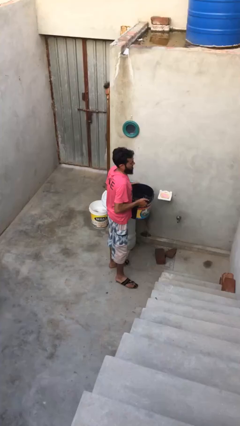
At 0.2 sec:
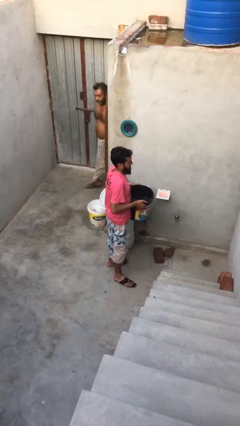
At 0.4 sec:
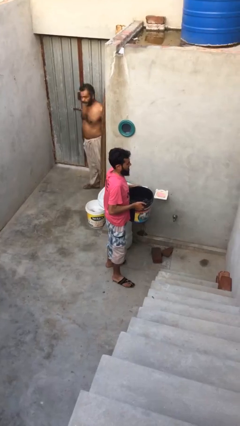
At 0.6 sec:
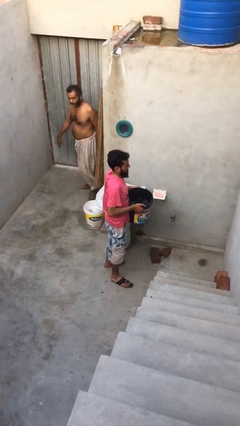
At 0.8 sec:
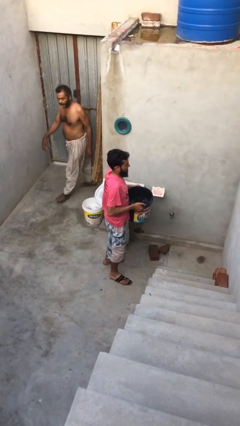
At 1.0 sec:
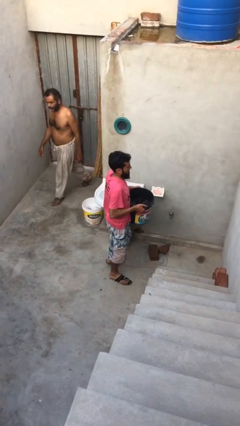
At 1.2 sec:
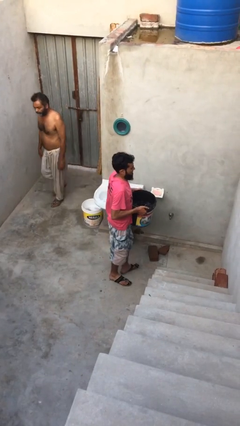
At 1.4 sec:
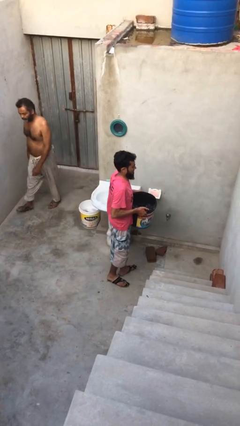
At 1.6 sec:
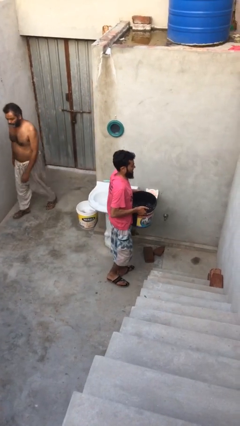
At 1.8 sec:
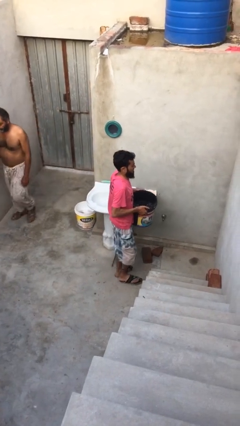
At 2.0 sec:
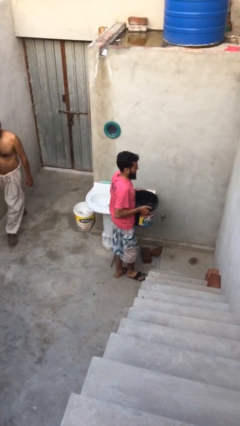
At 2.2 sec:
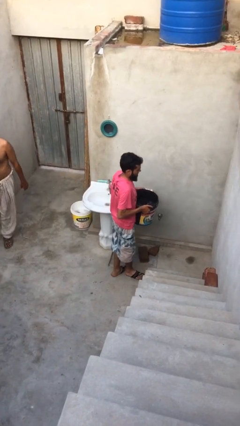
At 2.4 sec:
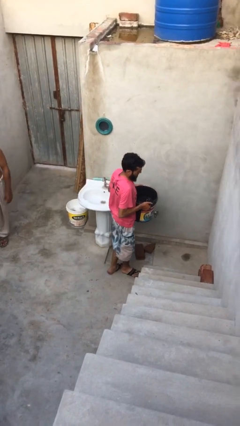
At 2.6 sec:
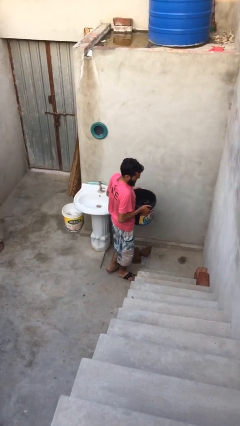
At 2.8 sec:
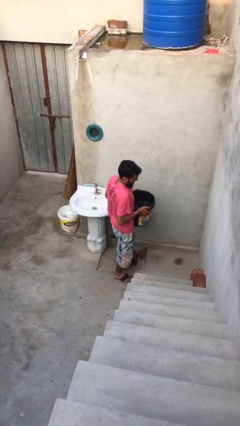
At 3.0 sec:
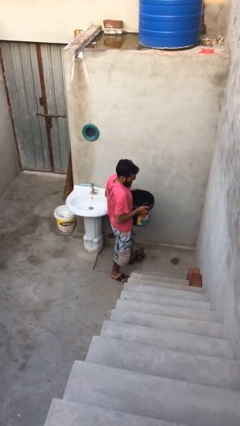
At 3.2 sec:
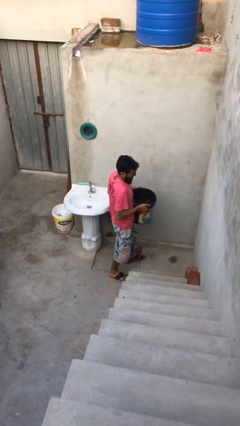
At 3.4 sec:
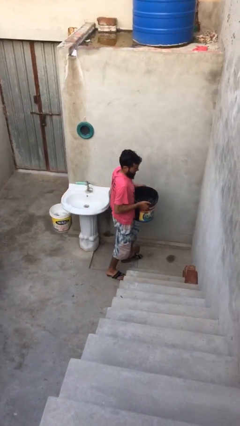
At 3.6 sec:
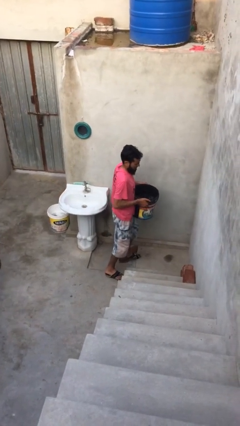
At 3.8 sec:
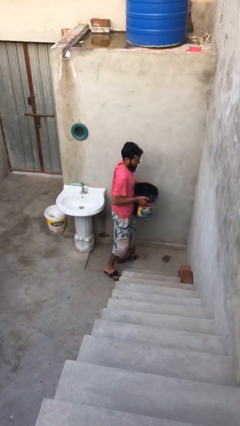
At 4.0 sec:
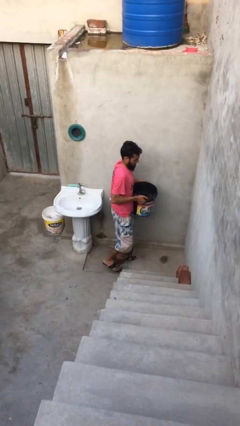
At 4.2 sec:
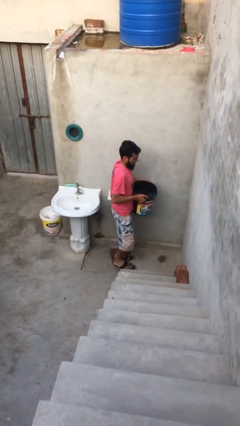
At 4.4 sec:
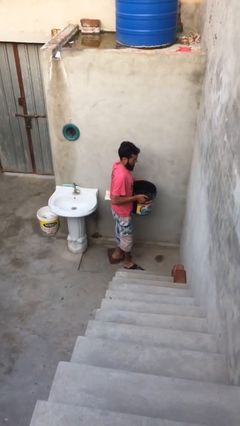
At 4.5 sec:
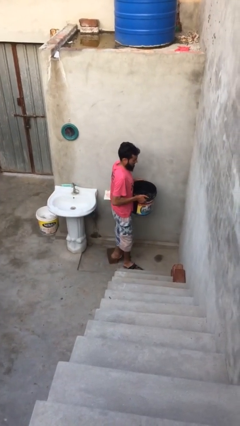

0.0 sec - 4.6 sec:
person carries heavy object

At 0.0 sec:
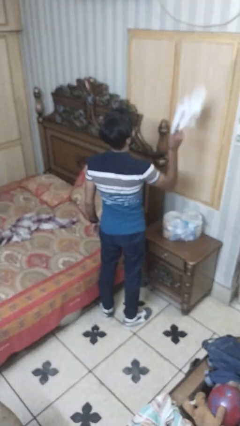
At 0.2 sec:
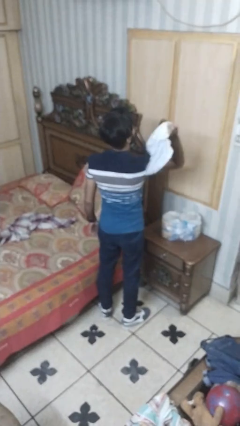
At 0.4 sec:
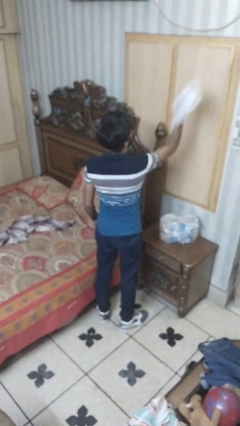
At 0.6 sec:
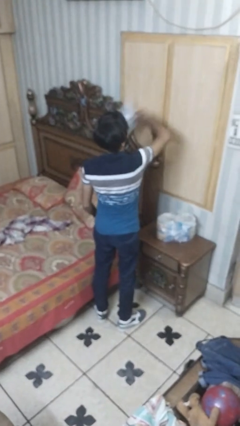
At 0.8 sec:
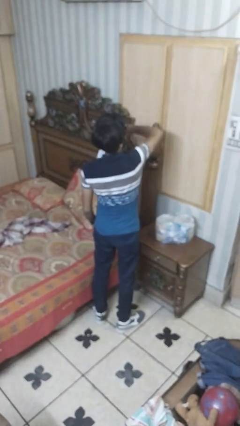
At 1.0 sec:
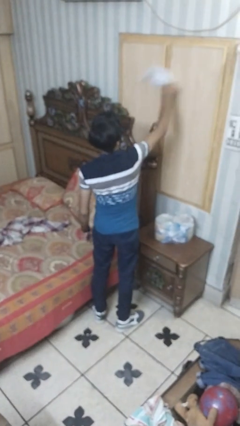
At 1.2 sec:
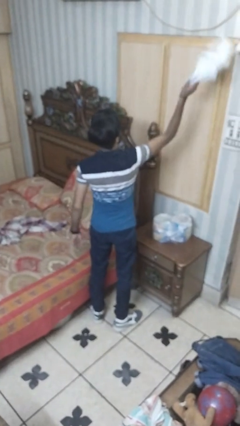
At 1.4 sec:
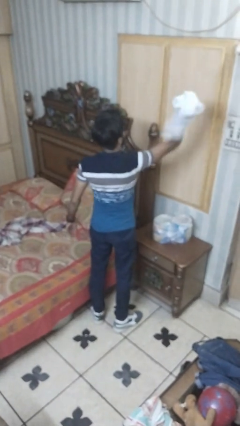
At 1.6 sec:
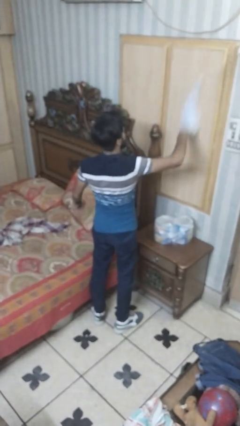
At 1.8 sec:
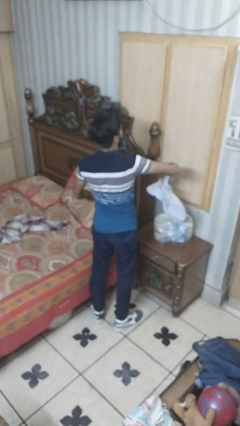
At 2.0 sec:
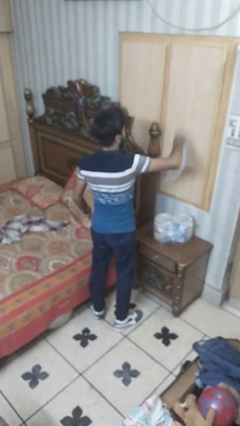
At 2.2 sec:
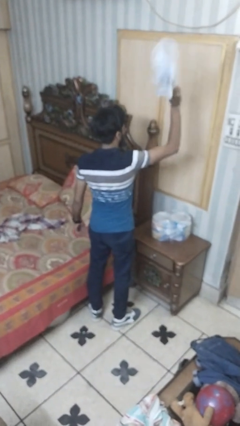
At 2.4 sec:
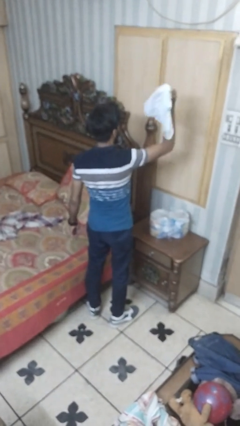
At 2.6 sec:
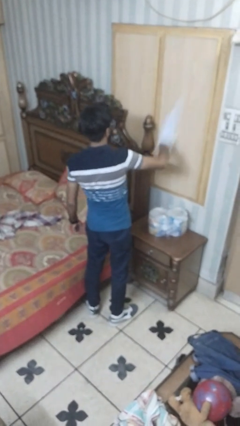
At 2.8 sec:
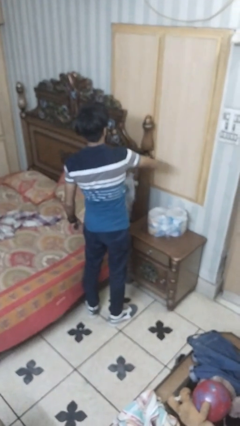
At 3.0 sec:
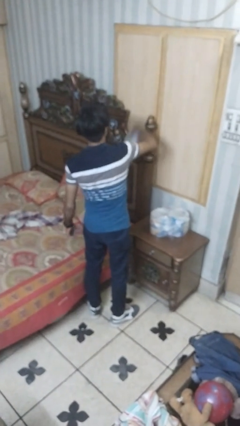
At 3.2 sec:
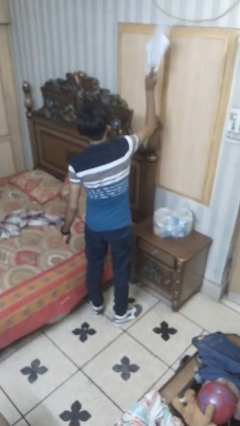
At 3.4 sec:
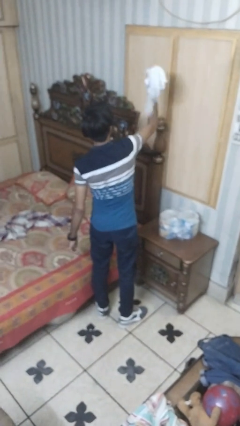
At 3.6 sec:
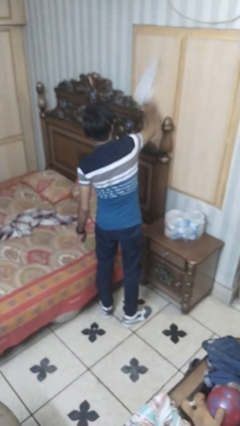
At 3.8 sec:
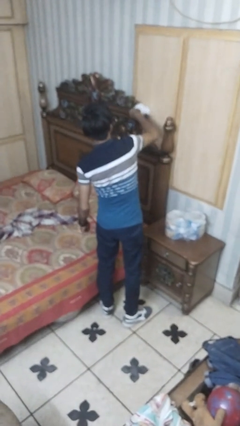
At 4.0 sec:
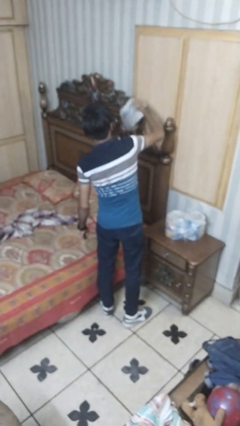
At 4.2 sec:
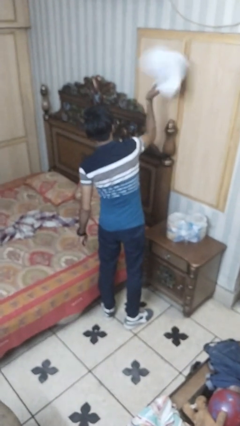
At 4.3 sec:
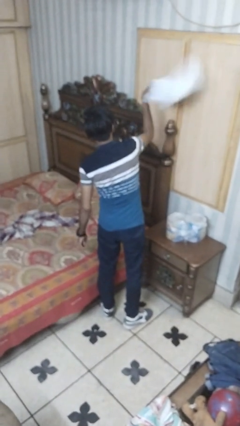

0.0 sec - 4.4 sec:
person dusts furniture

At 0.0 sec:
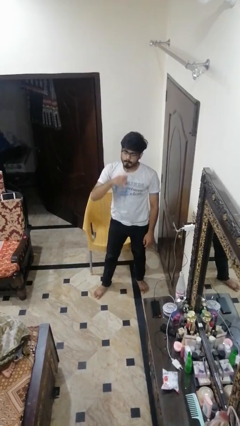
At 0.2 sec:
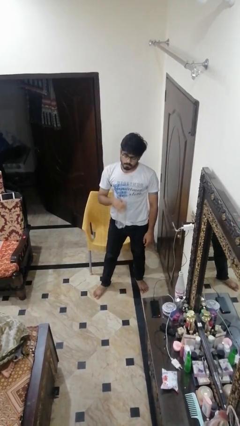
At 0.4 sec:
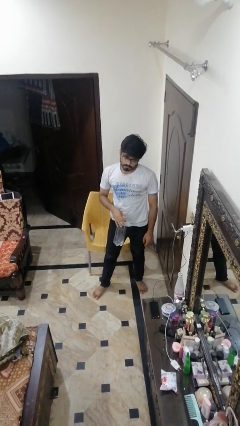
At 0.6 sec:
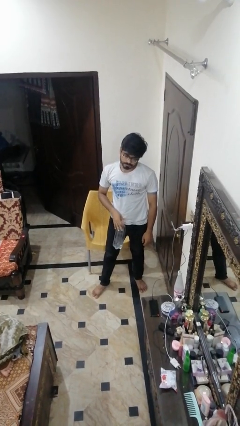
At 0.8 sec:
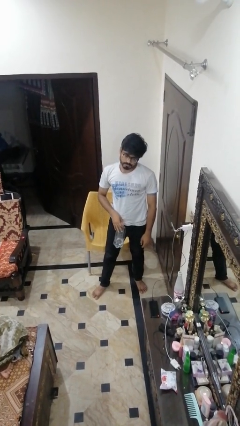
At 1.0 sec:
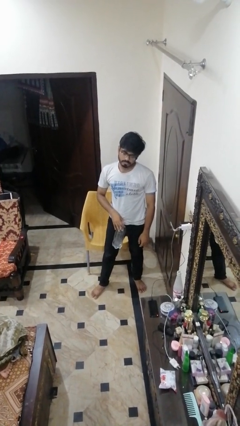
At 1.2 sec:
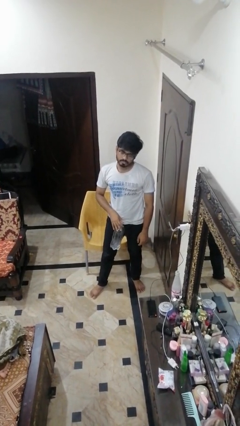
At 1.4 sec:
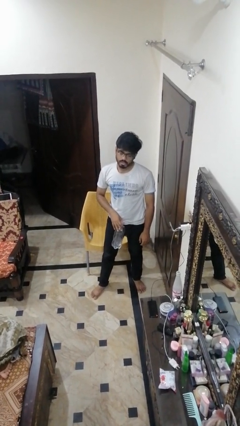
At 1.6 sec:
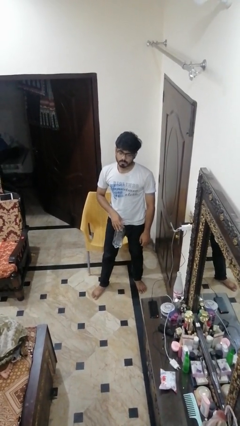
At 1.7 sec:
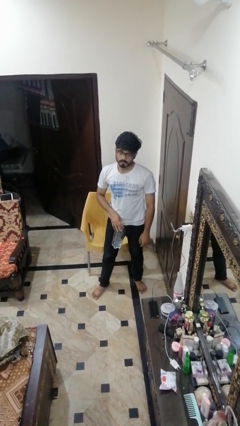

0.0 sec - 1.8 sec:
person picks up object from floor

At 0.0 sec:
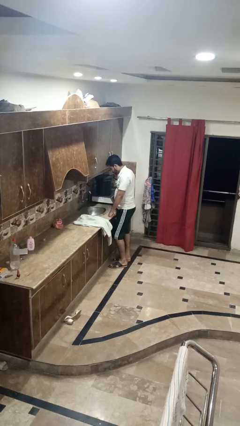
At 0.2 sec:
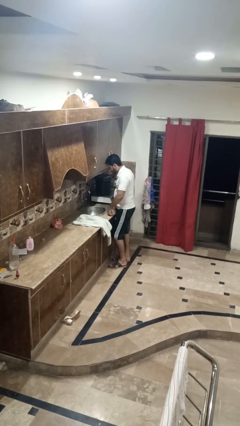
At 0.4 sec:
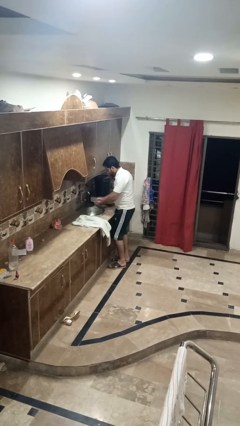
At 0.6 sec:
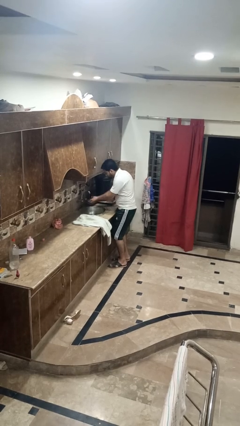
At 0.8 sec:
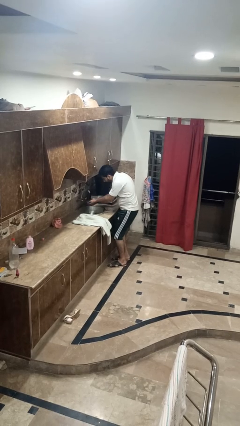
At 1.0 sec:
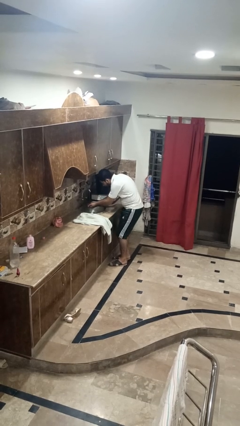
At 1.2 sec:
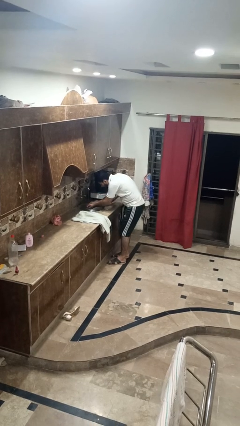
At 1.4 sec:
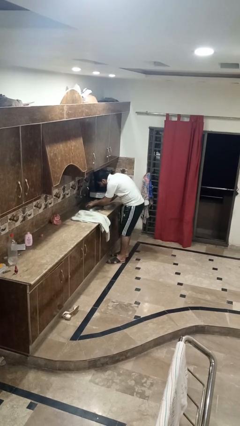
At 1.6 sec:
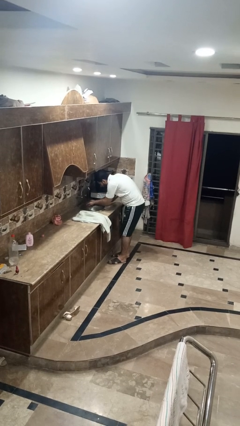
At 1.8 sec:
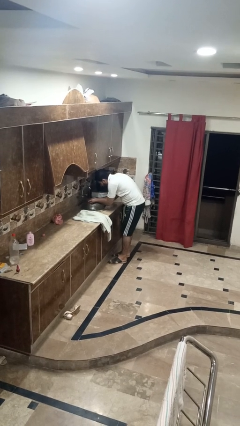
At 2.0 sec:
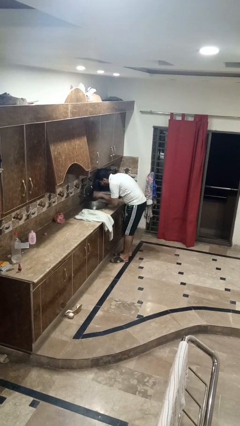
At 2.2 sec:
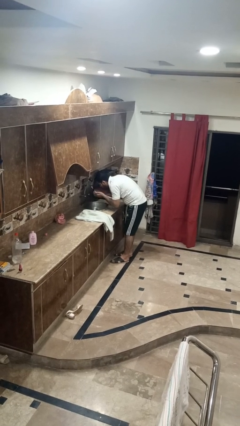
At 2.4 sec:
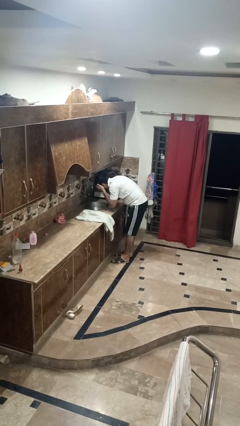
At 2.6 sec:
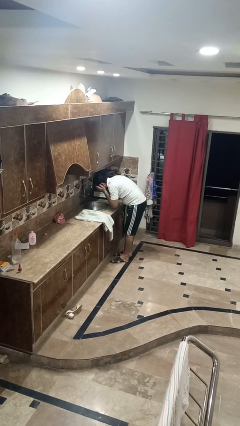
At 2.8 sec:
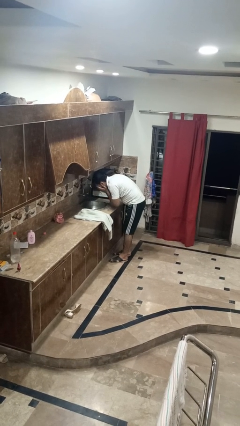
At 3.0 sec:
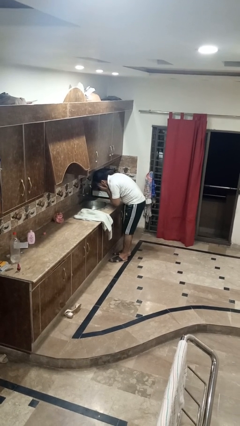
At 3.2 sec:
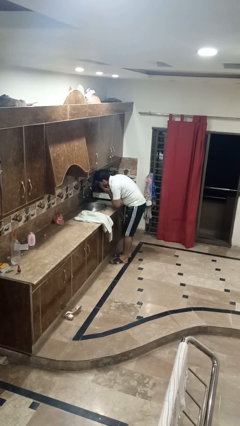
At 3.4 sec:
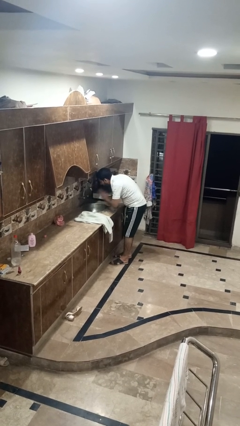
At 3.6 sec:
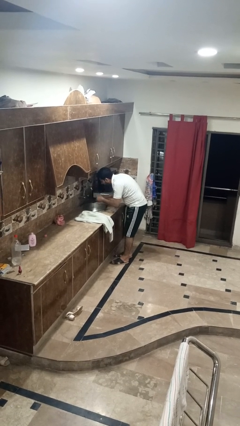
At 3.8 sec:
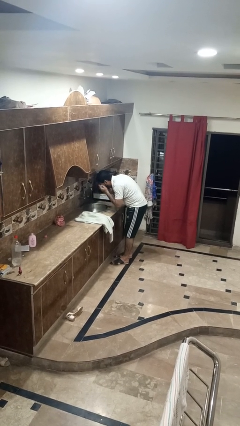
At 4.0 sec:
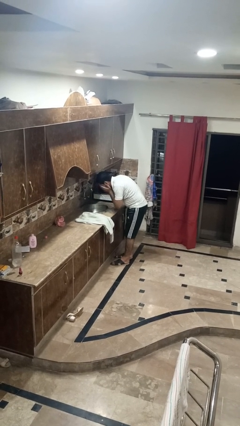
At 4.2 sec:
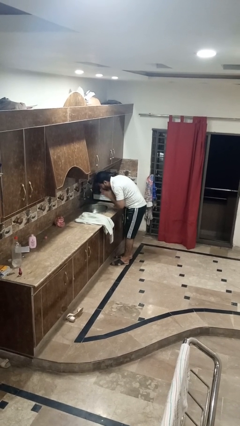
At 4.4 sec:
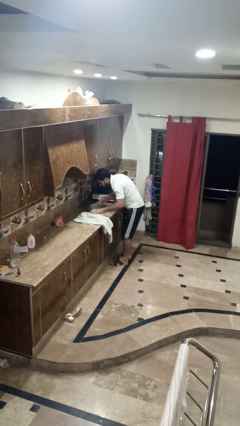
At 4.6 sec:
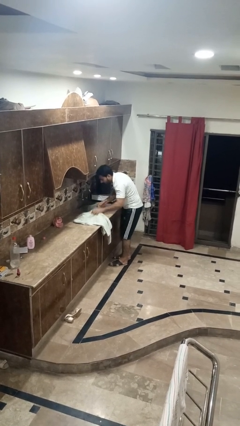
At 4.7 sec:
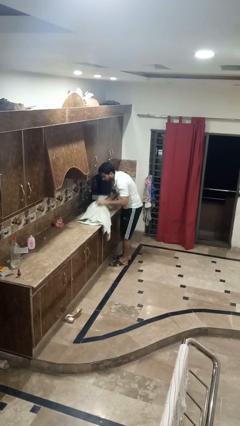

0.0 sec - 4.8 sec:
person washes face

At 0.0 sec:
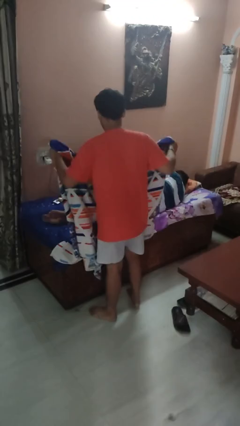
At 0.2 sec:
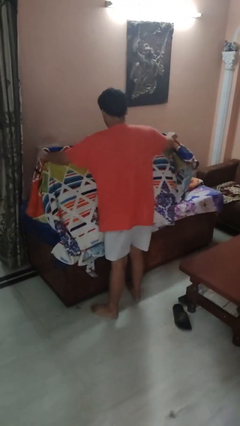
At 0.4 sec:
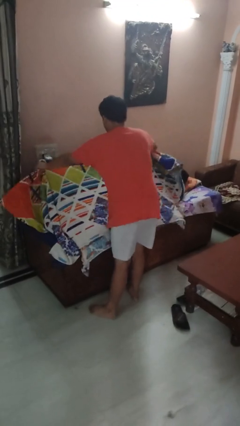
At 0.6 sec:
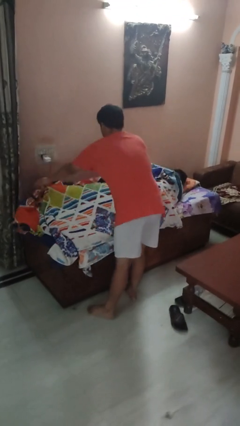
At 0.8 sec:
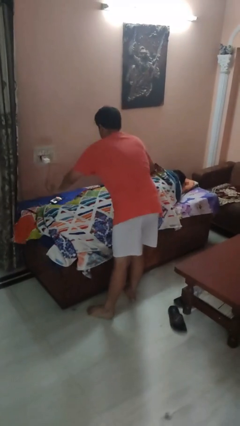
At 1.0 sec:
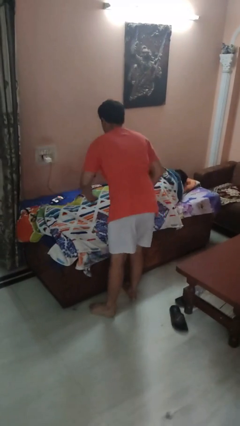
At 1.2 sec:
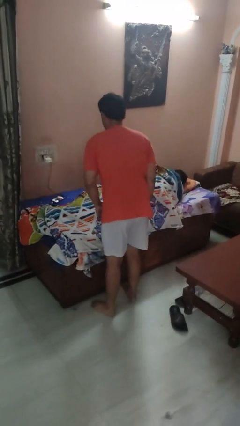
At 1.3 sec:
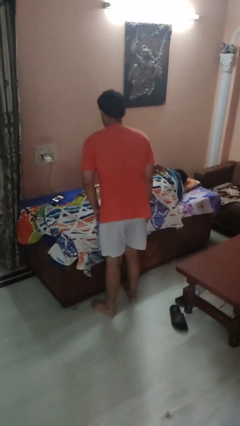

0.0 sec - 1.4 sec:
person covers friend with blanket
